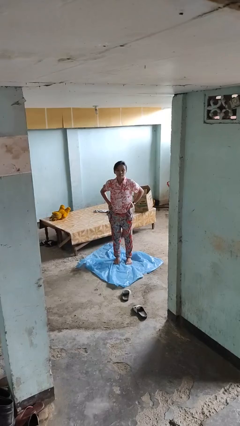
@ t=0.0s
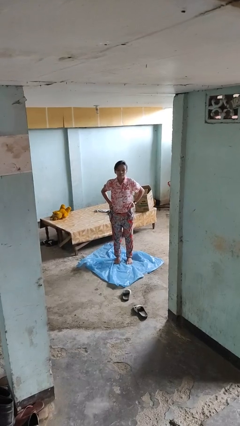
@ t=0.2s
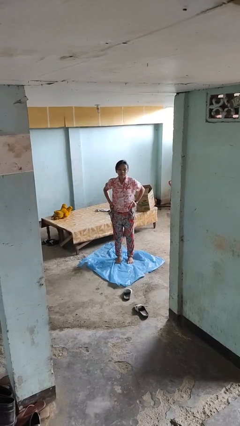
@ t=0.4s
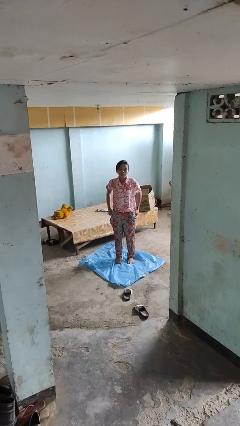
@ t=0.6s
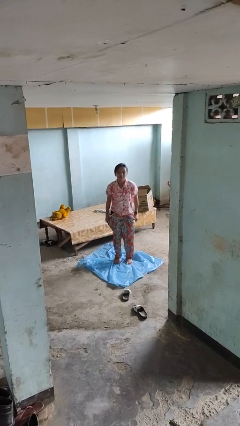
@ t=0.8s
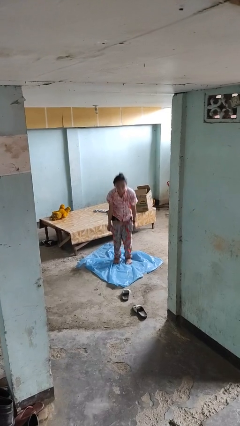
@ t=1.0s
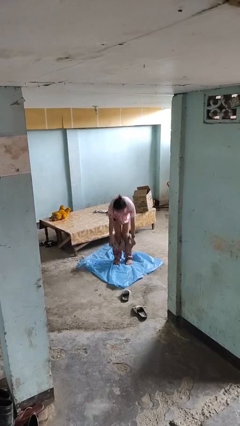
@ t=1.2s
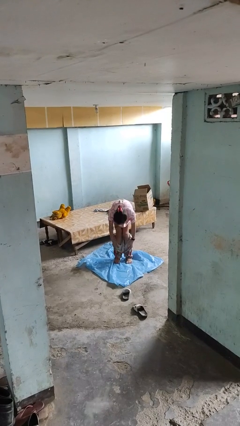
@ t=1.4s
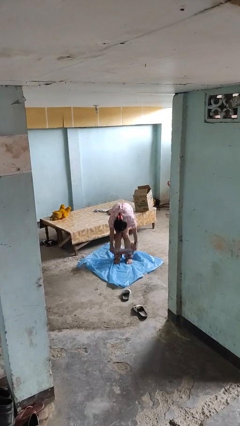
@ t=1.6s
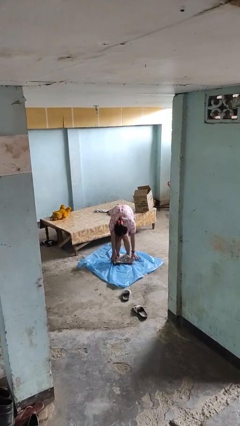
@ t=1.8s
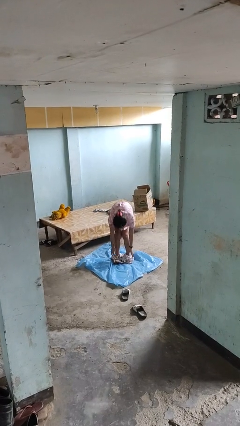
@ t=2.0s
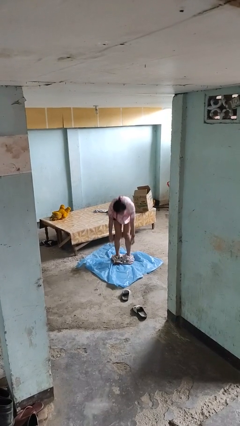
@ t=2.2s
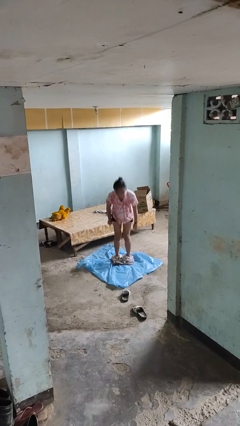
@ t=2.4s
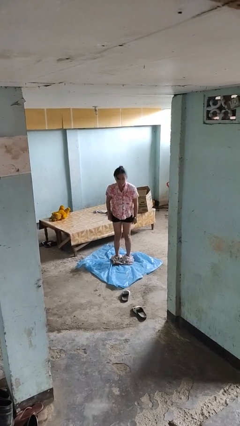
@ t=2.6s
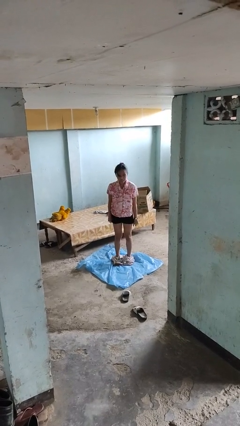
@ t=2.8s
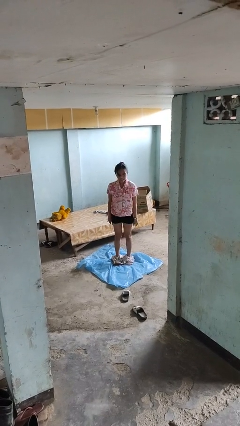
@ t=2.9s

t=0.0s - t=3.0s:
person takes off pants

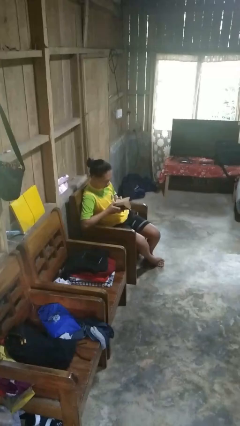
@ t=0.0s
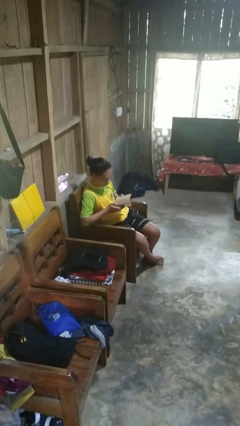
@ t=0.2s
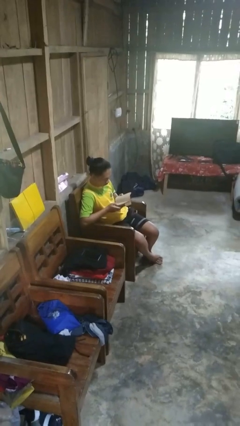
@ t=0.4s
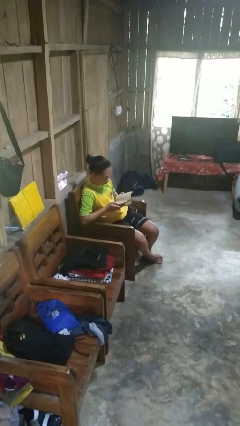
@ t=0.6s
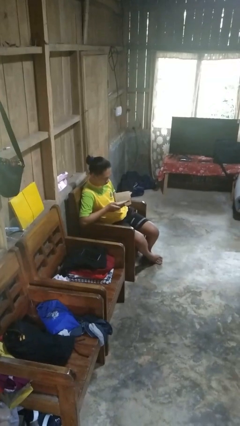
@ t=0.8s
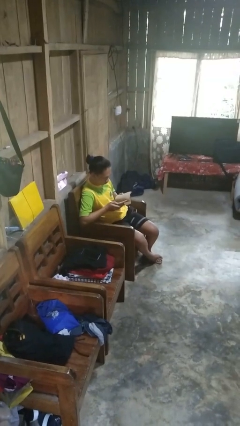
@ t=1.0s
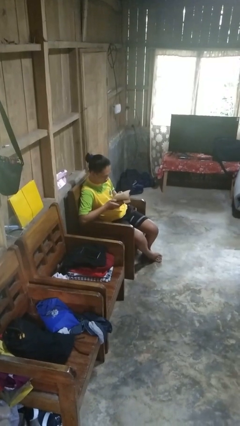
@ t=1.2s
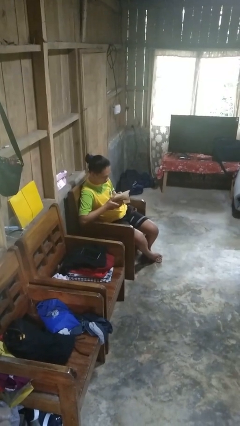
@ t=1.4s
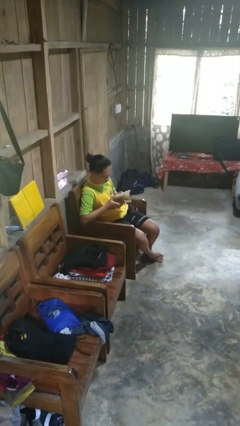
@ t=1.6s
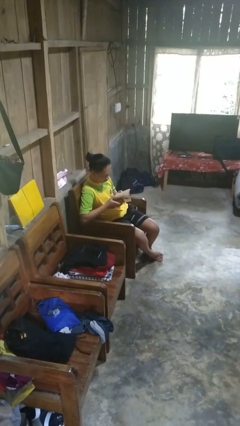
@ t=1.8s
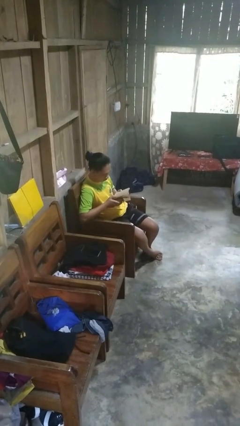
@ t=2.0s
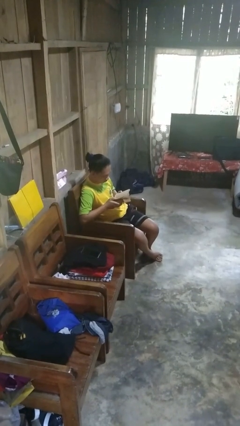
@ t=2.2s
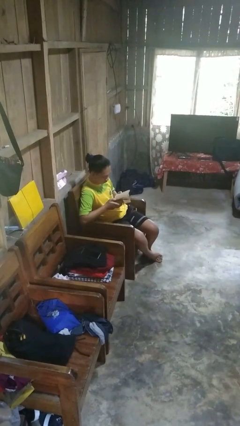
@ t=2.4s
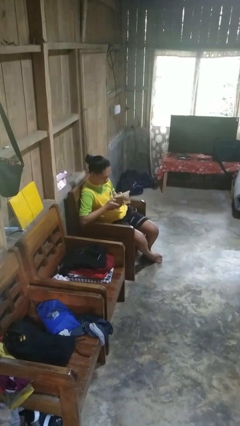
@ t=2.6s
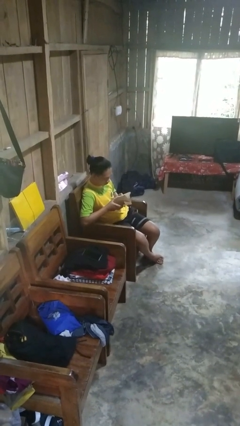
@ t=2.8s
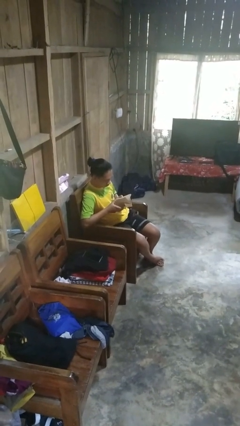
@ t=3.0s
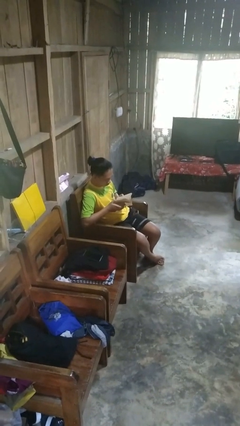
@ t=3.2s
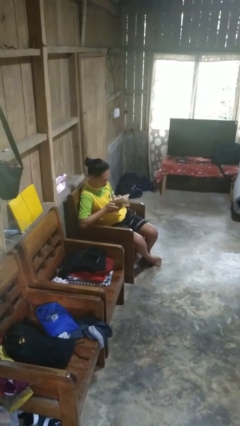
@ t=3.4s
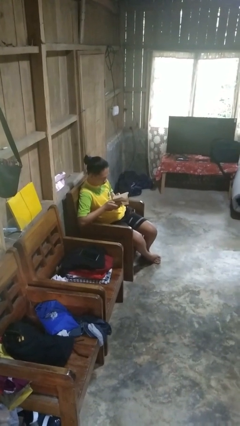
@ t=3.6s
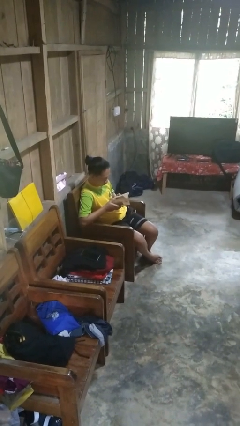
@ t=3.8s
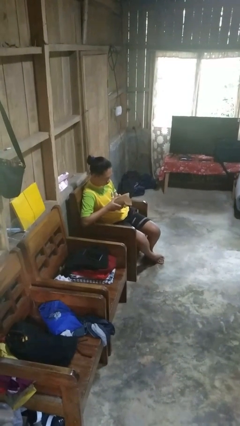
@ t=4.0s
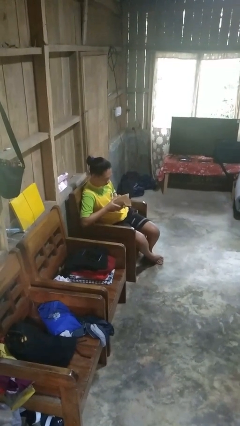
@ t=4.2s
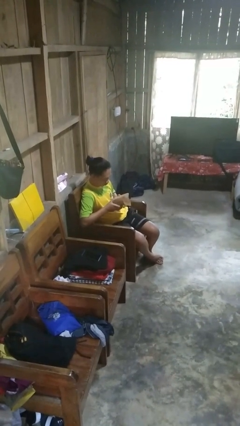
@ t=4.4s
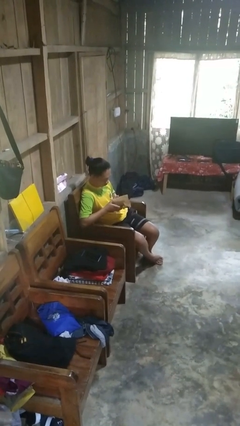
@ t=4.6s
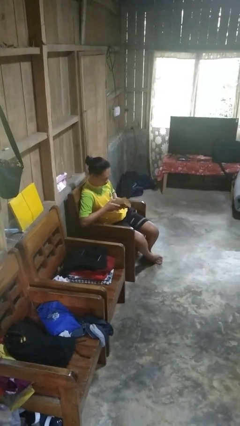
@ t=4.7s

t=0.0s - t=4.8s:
person reads book

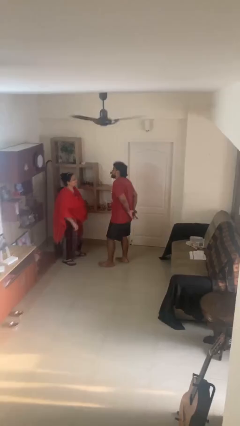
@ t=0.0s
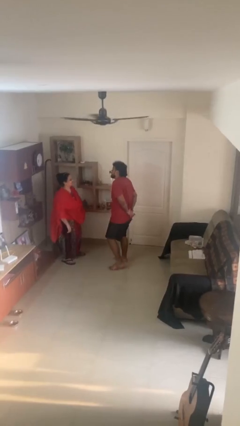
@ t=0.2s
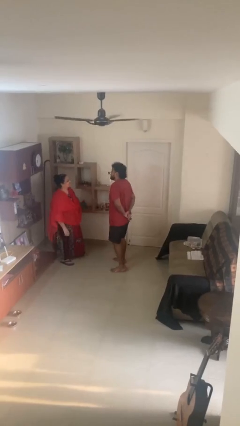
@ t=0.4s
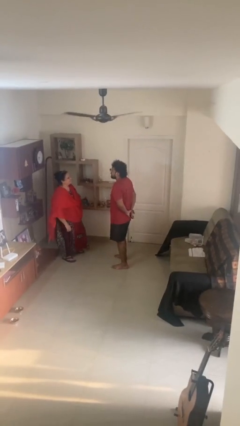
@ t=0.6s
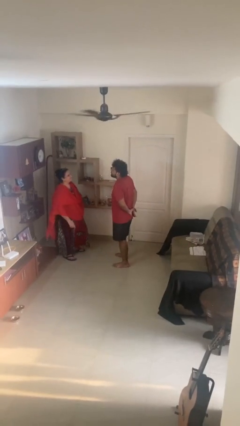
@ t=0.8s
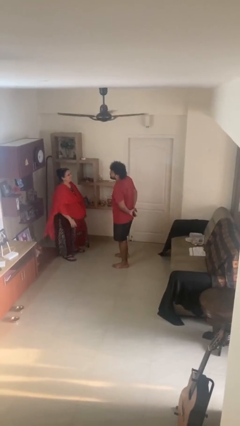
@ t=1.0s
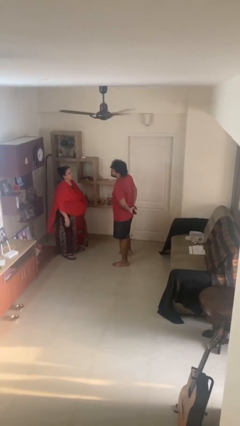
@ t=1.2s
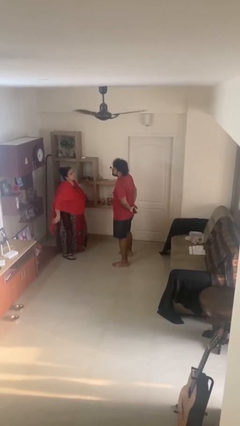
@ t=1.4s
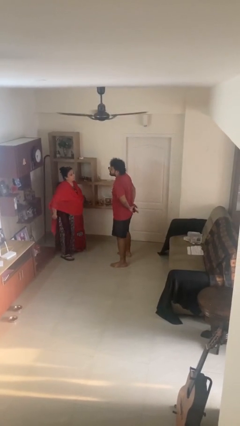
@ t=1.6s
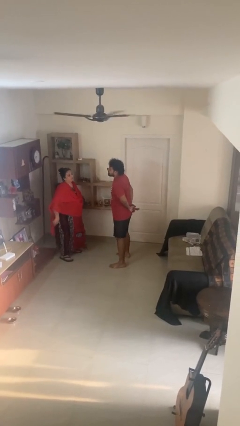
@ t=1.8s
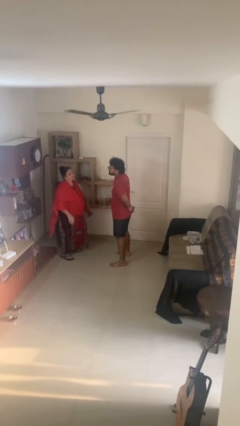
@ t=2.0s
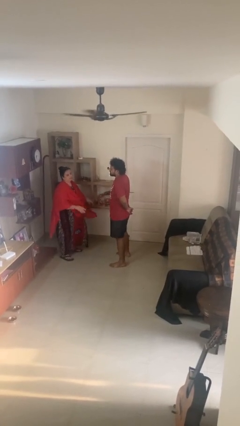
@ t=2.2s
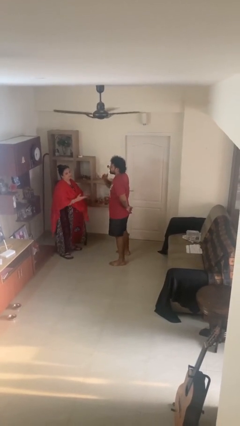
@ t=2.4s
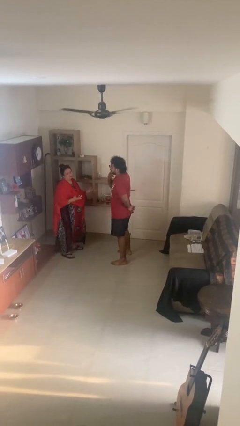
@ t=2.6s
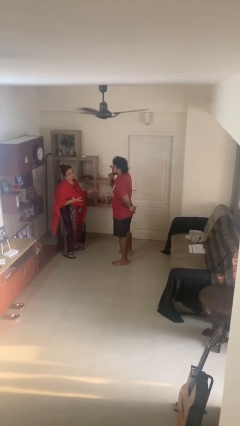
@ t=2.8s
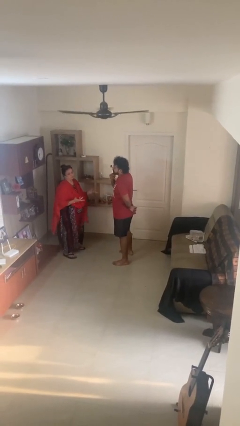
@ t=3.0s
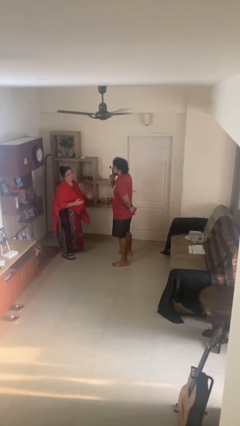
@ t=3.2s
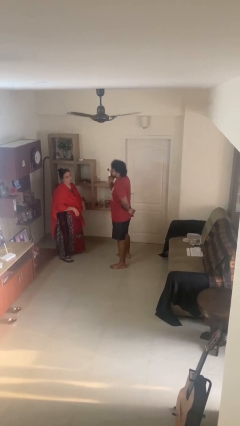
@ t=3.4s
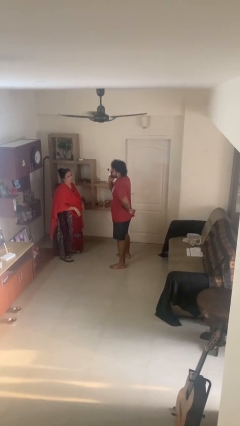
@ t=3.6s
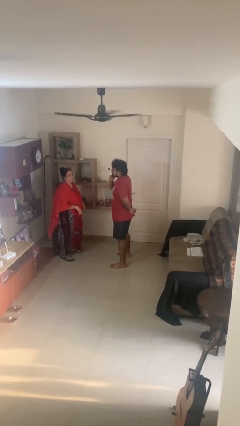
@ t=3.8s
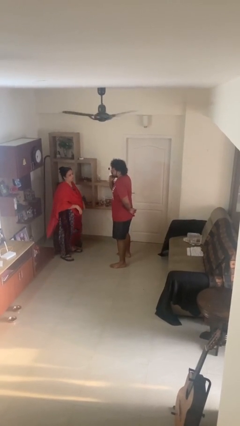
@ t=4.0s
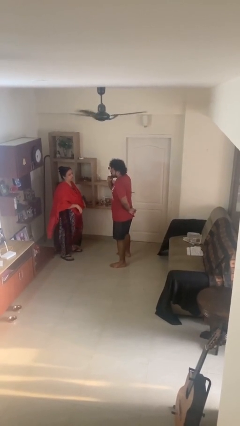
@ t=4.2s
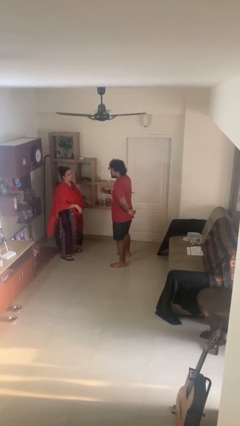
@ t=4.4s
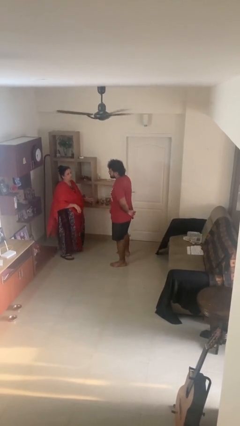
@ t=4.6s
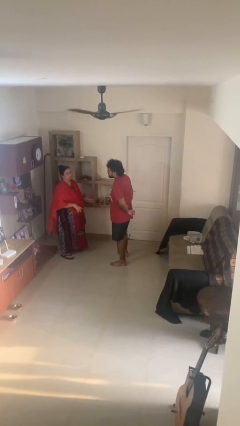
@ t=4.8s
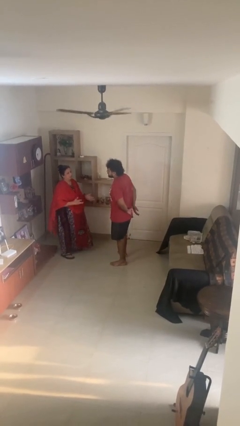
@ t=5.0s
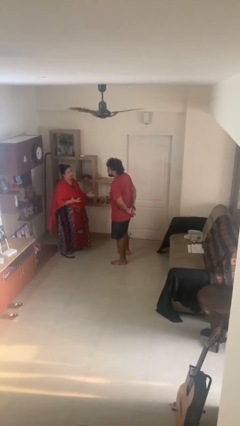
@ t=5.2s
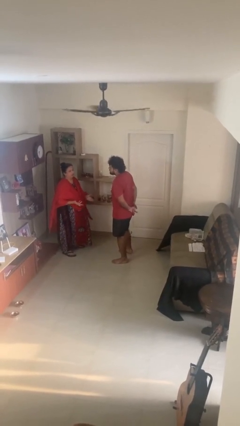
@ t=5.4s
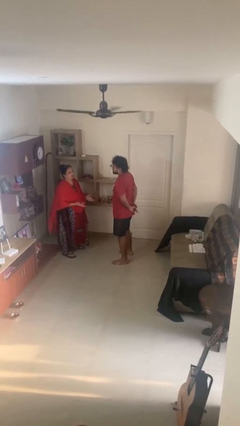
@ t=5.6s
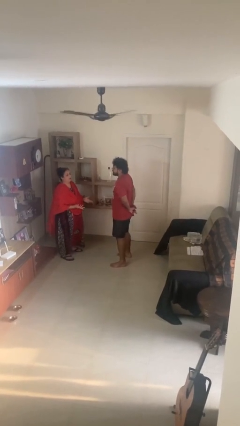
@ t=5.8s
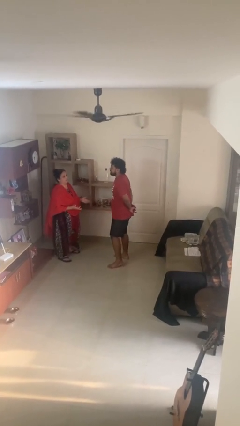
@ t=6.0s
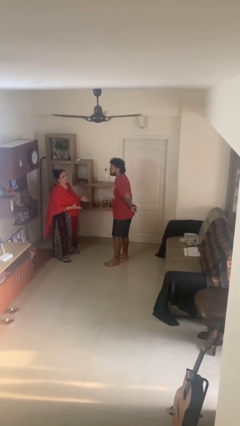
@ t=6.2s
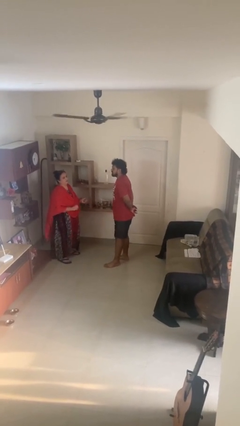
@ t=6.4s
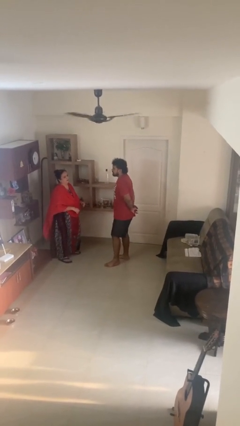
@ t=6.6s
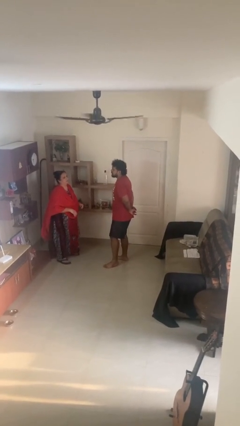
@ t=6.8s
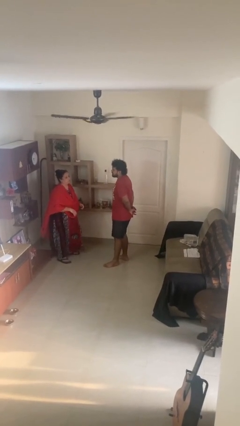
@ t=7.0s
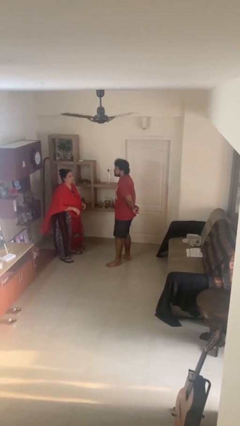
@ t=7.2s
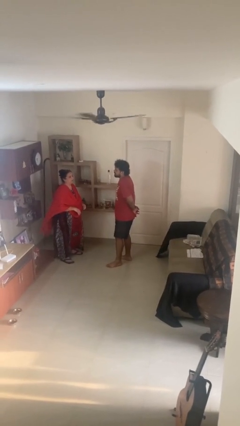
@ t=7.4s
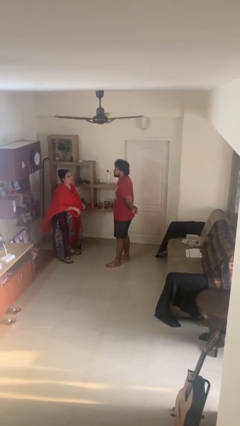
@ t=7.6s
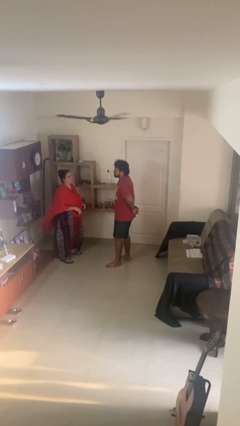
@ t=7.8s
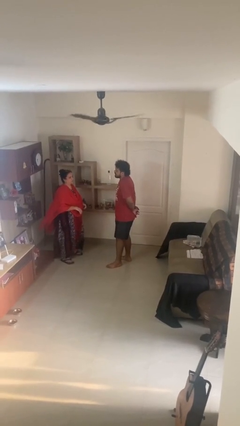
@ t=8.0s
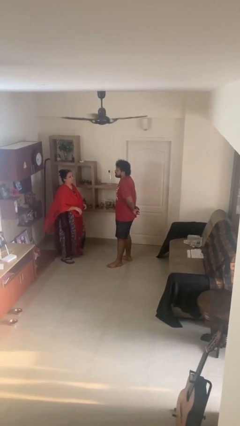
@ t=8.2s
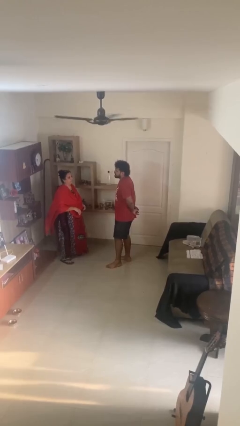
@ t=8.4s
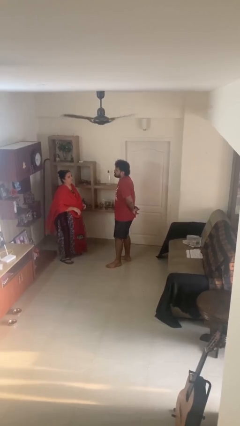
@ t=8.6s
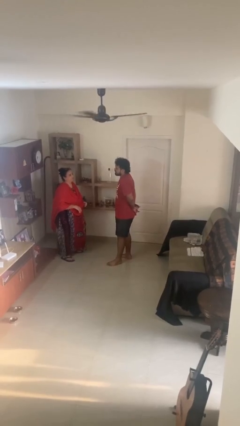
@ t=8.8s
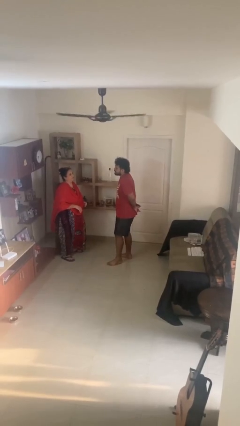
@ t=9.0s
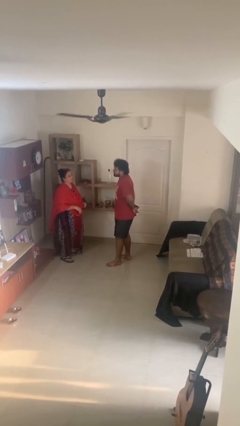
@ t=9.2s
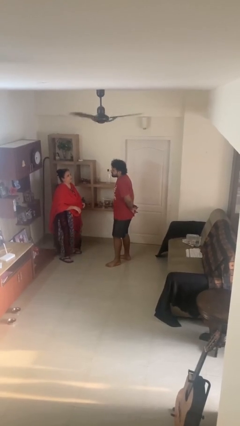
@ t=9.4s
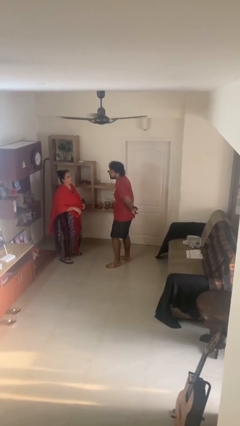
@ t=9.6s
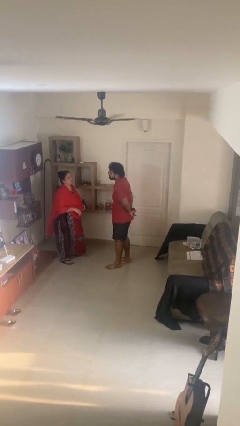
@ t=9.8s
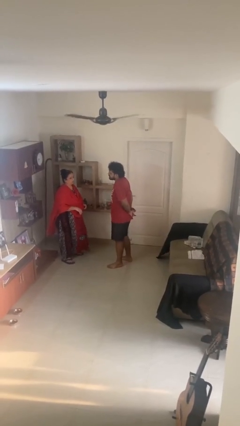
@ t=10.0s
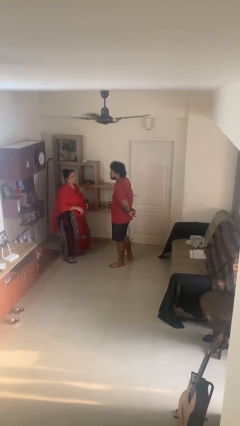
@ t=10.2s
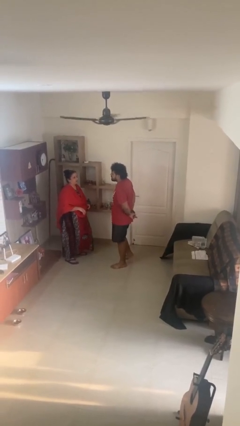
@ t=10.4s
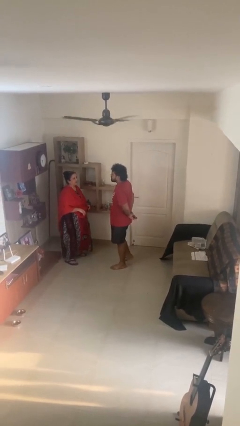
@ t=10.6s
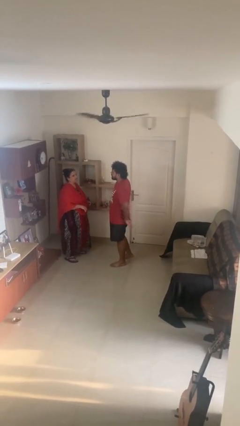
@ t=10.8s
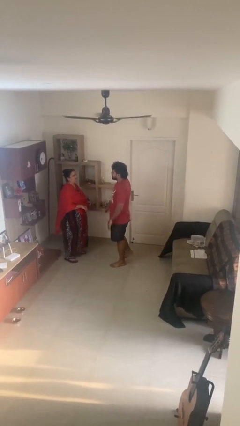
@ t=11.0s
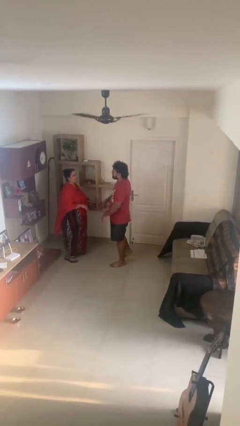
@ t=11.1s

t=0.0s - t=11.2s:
person talks to person
